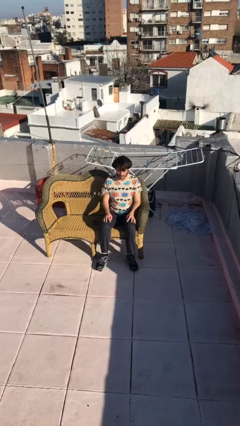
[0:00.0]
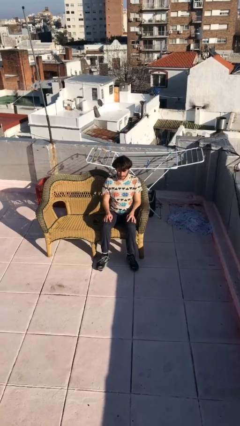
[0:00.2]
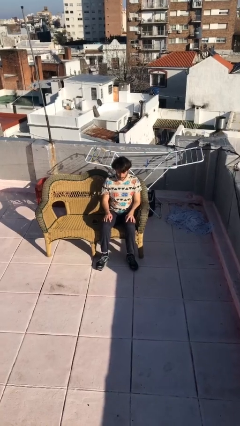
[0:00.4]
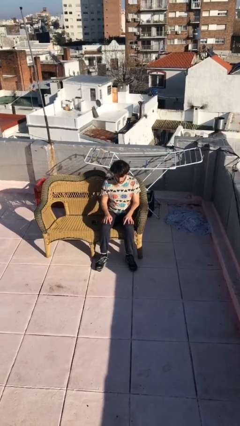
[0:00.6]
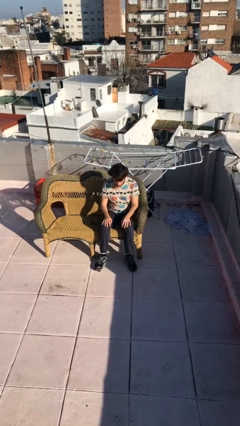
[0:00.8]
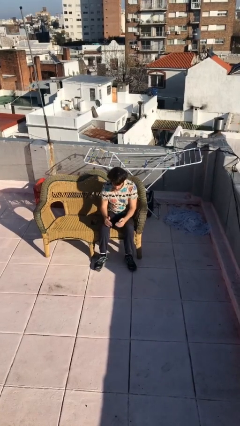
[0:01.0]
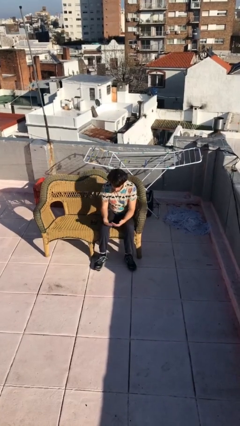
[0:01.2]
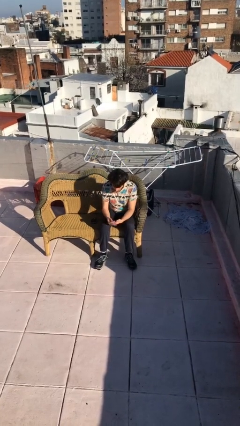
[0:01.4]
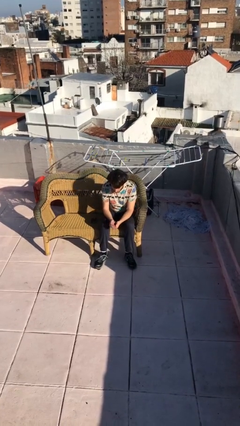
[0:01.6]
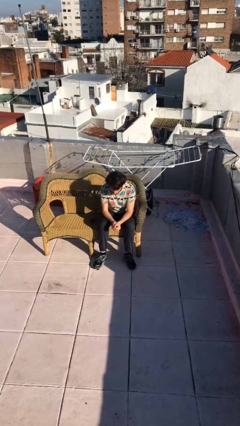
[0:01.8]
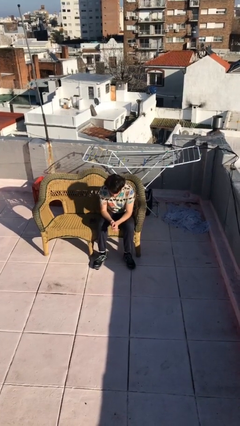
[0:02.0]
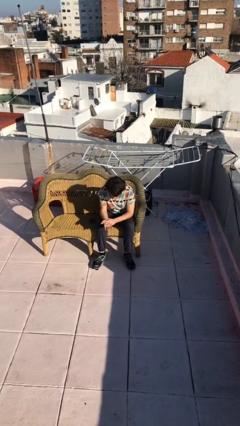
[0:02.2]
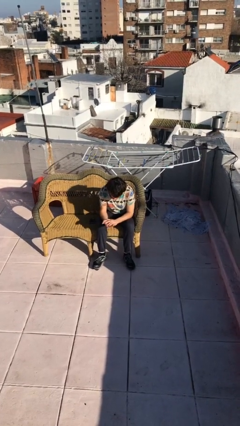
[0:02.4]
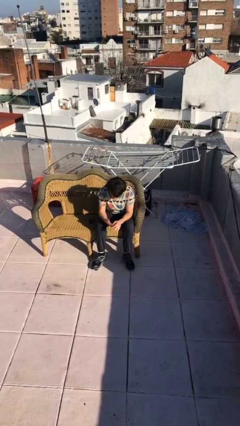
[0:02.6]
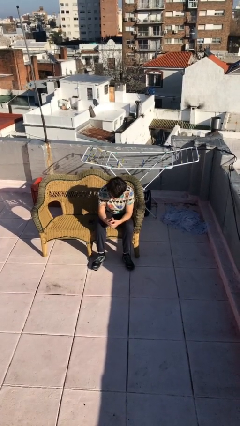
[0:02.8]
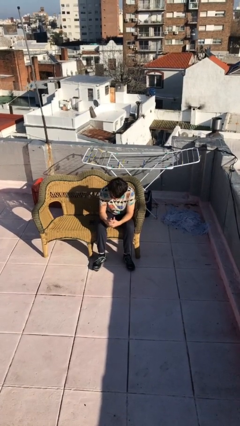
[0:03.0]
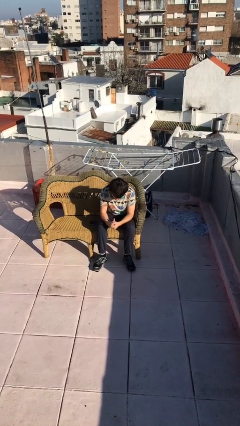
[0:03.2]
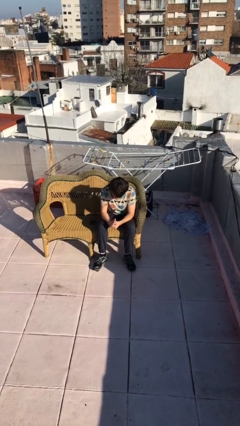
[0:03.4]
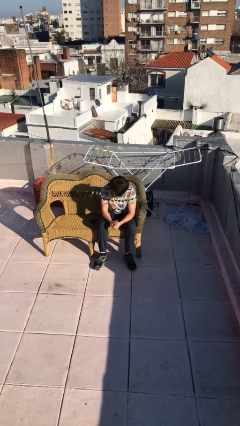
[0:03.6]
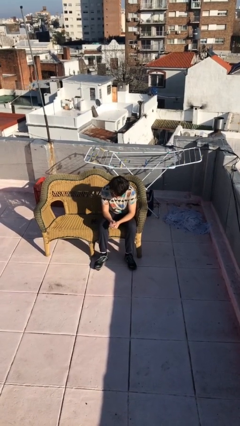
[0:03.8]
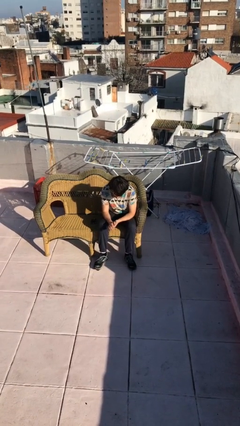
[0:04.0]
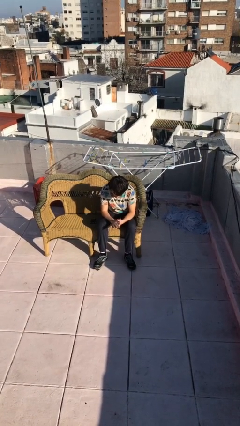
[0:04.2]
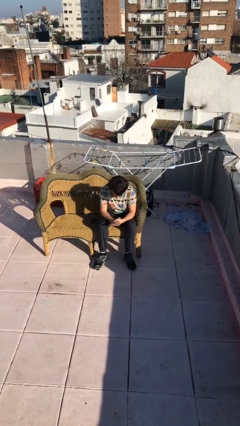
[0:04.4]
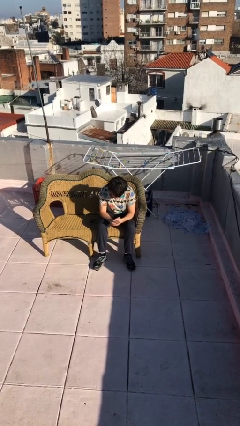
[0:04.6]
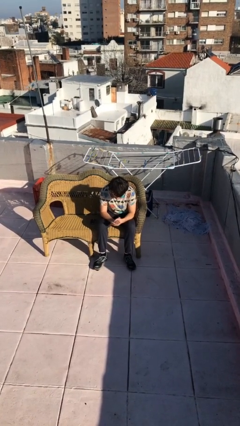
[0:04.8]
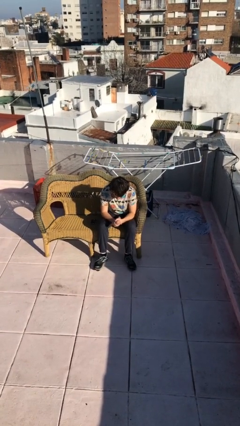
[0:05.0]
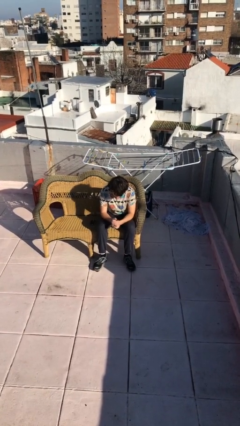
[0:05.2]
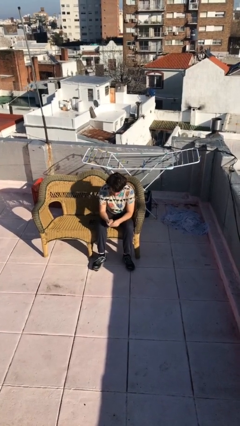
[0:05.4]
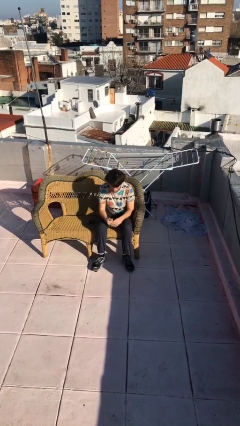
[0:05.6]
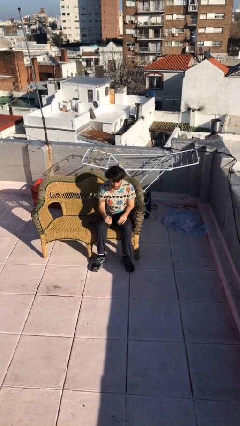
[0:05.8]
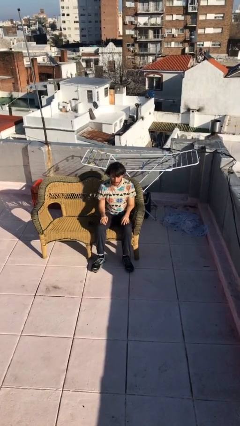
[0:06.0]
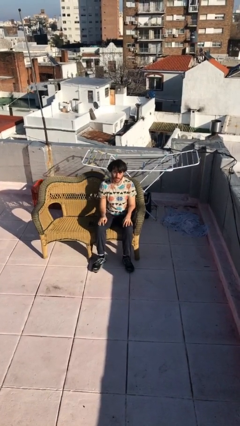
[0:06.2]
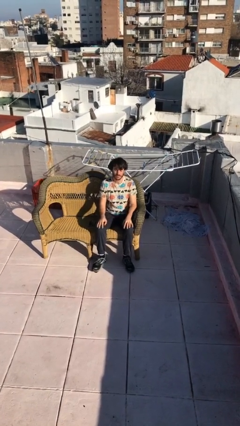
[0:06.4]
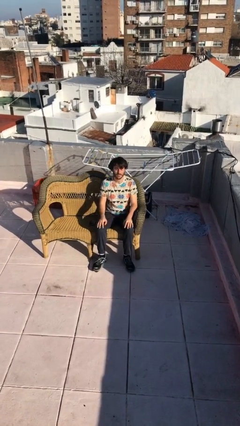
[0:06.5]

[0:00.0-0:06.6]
person looks at hands in lap

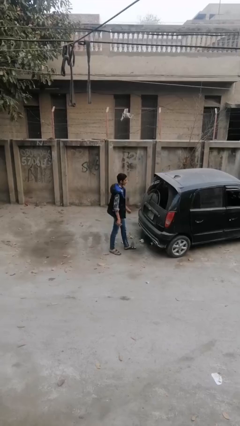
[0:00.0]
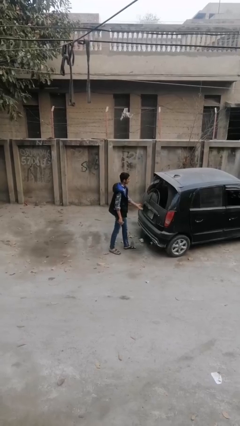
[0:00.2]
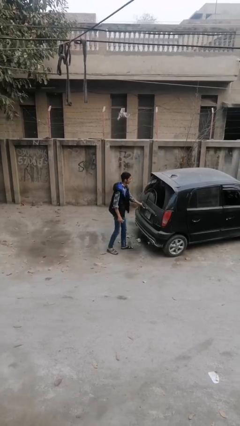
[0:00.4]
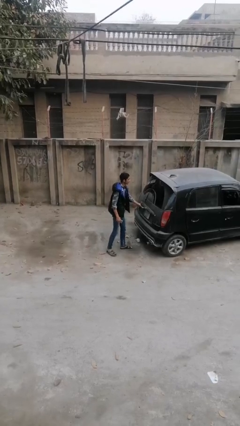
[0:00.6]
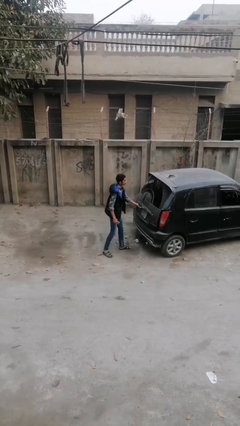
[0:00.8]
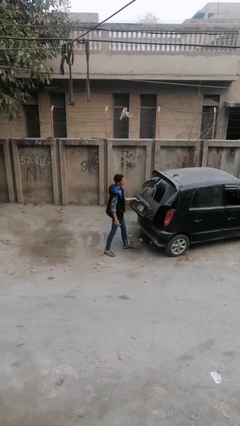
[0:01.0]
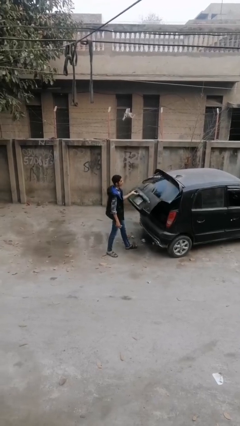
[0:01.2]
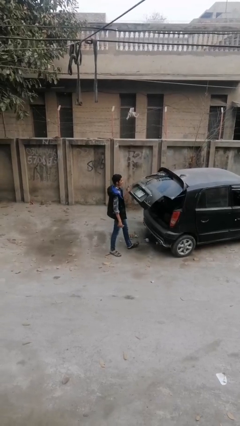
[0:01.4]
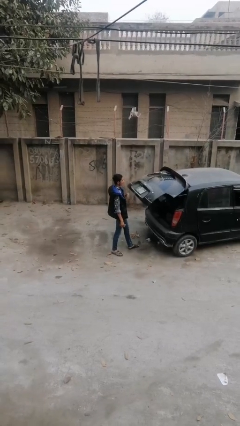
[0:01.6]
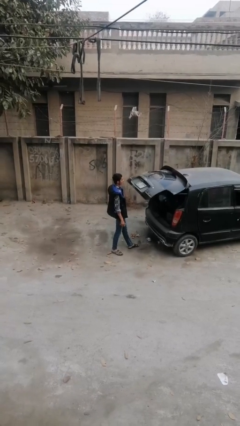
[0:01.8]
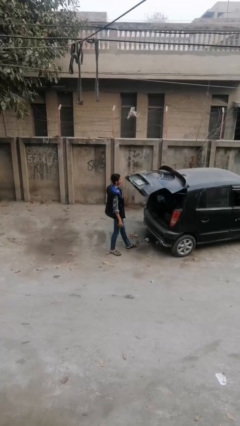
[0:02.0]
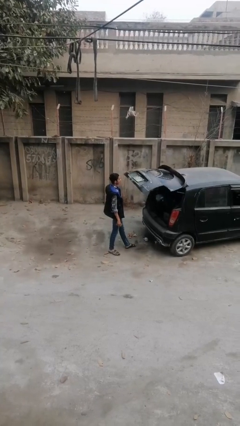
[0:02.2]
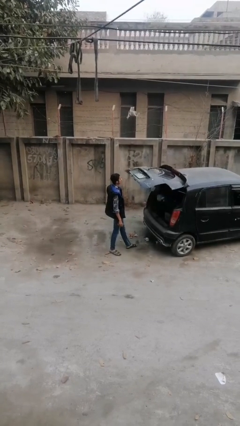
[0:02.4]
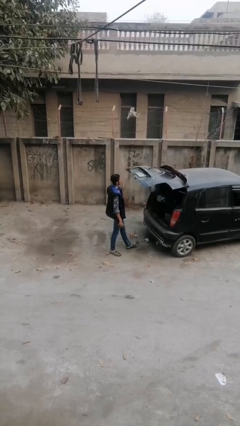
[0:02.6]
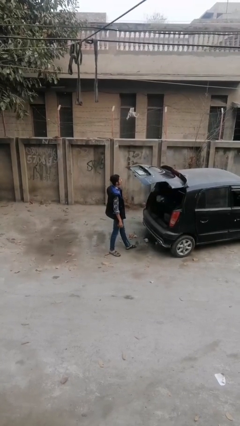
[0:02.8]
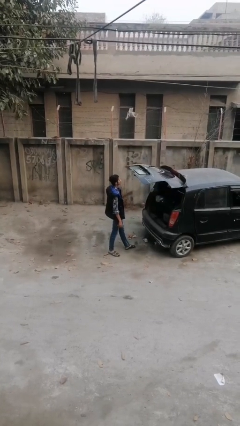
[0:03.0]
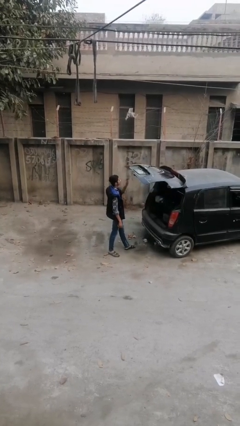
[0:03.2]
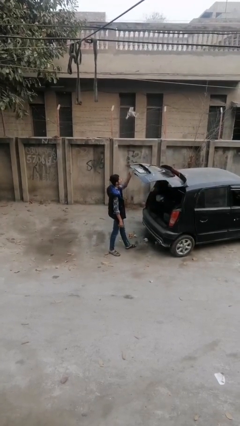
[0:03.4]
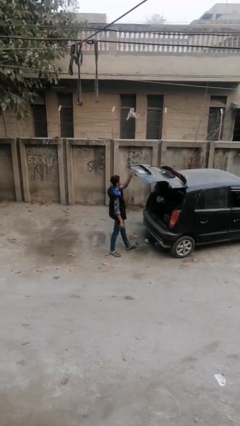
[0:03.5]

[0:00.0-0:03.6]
person opens car trunk

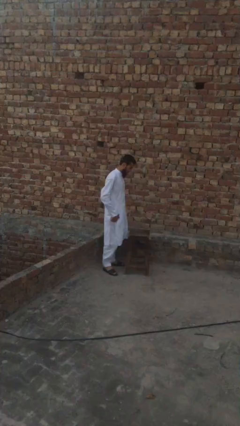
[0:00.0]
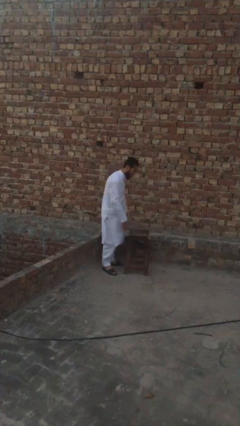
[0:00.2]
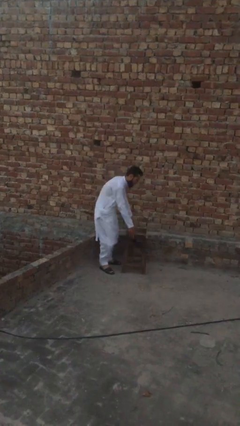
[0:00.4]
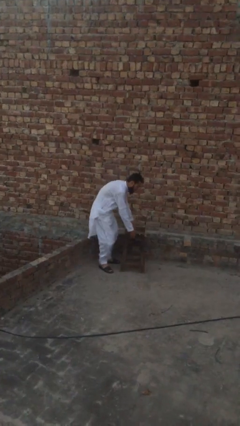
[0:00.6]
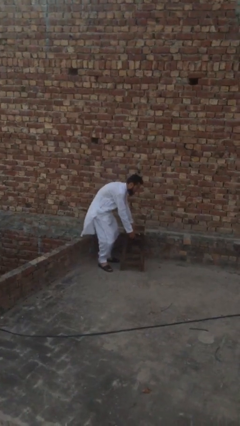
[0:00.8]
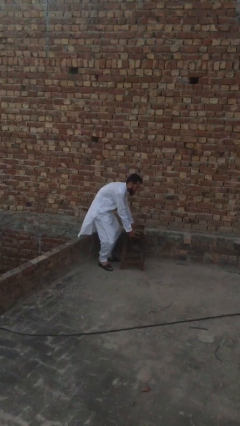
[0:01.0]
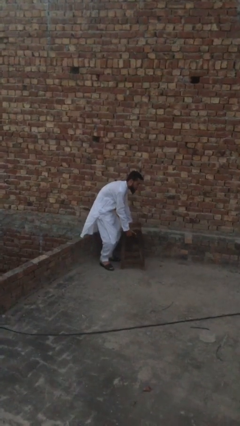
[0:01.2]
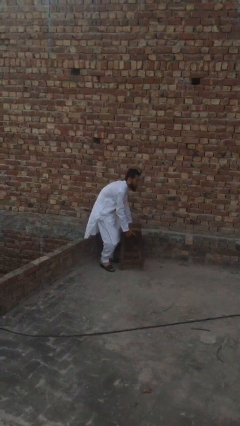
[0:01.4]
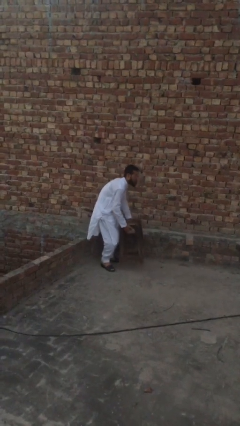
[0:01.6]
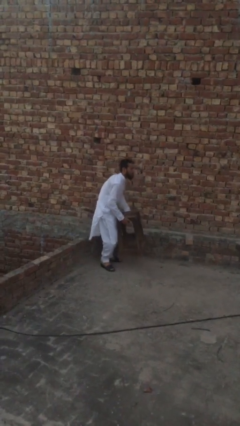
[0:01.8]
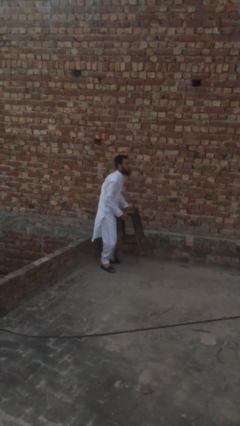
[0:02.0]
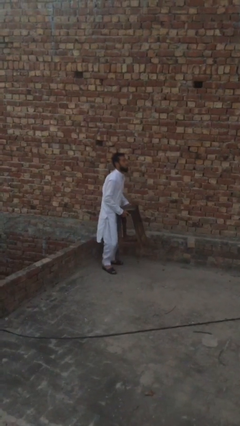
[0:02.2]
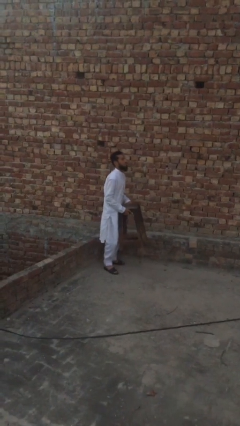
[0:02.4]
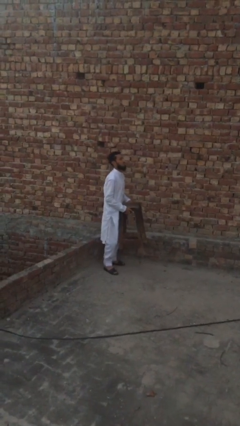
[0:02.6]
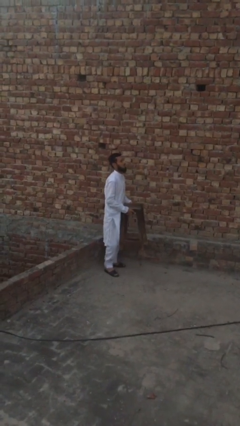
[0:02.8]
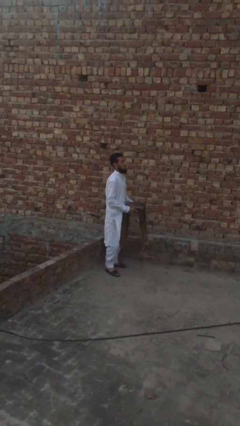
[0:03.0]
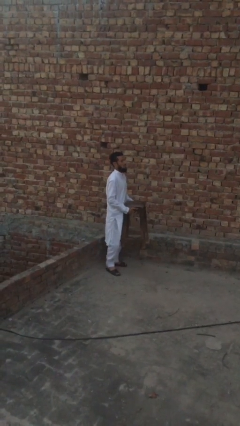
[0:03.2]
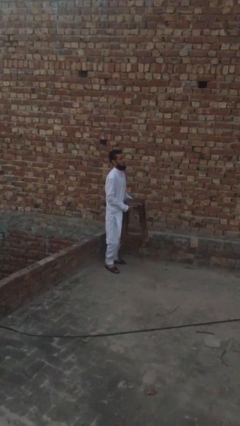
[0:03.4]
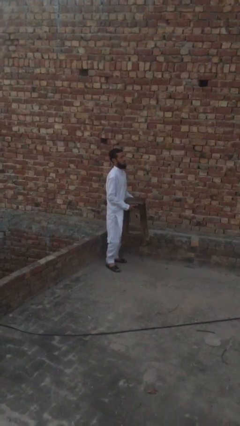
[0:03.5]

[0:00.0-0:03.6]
person picks up object from floor

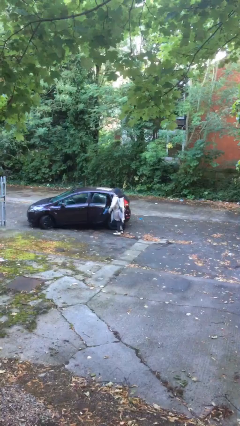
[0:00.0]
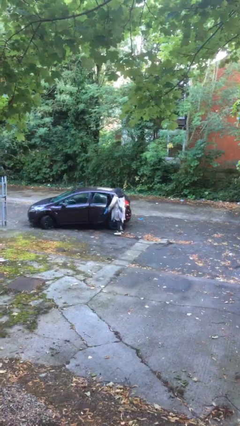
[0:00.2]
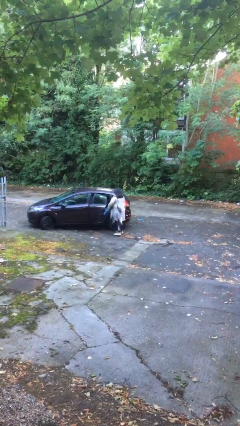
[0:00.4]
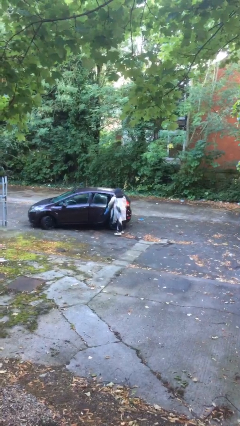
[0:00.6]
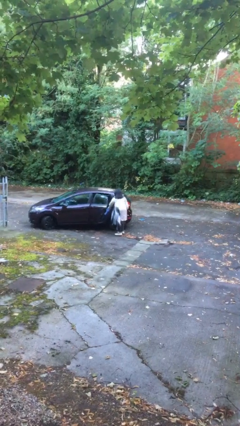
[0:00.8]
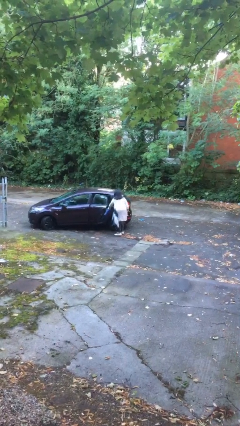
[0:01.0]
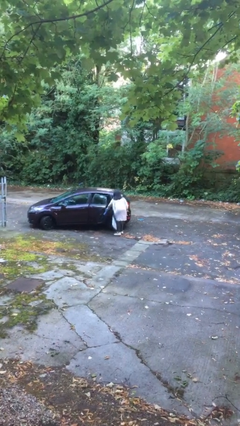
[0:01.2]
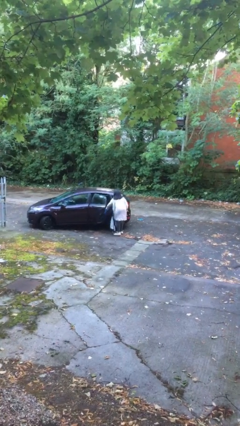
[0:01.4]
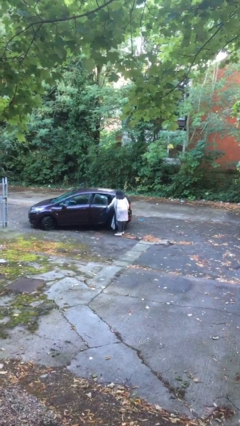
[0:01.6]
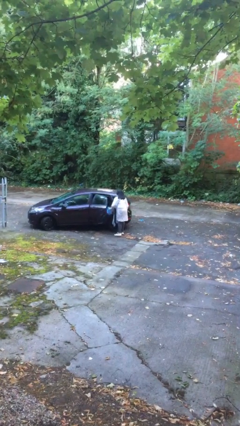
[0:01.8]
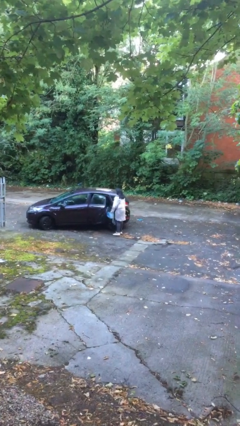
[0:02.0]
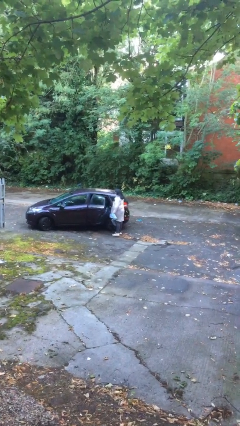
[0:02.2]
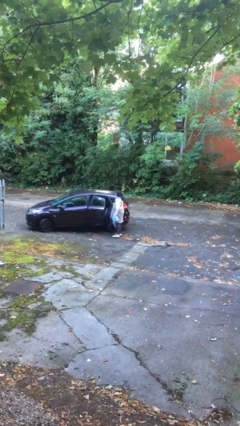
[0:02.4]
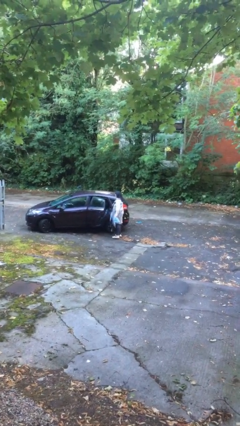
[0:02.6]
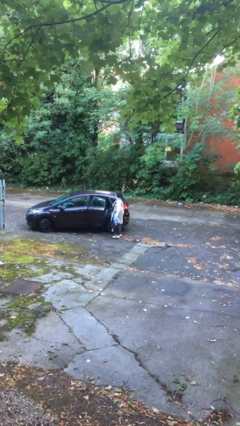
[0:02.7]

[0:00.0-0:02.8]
person unloads car

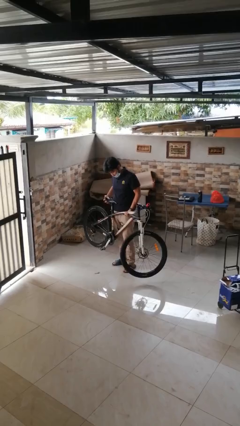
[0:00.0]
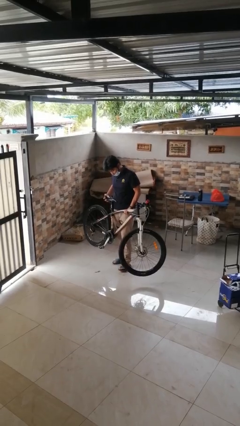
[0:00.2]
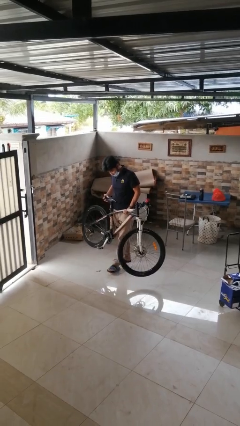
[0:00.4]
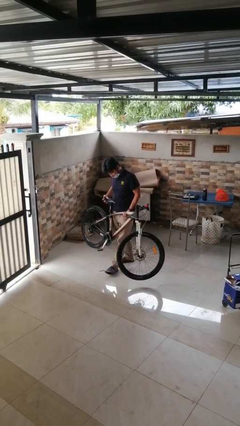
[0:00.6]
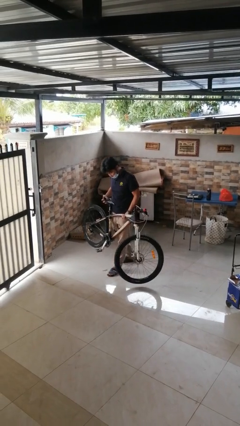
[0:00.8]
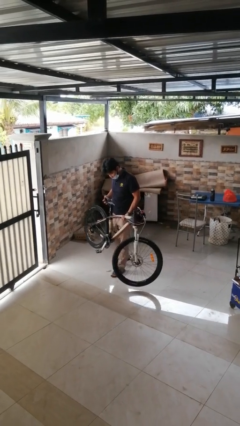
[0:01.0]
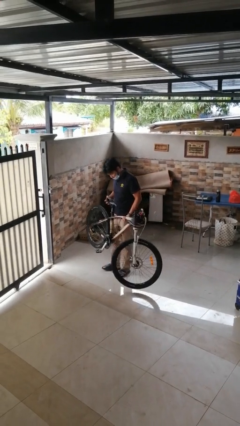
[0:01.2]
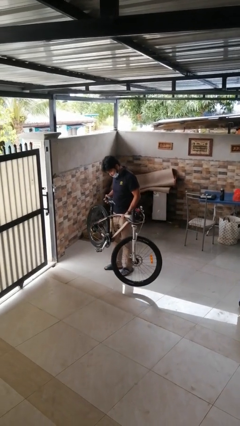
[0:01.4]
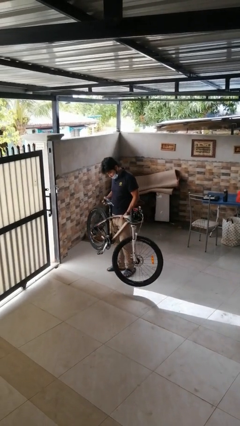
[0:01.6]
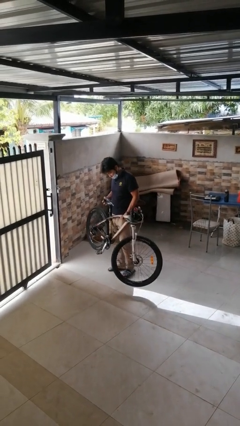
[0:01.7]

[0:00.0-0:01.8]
person carries bicycle
